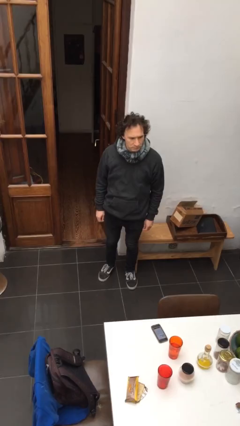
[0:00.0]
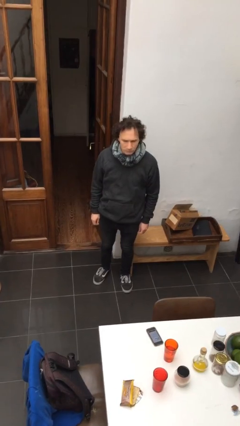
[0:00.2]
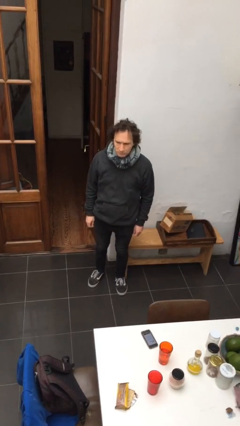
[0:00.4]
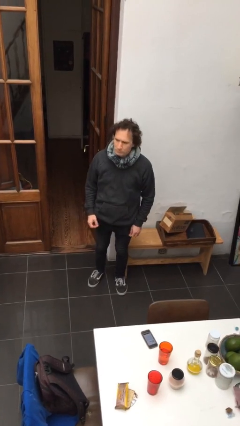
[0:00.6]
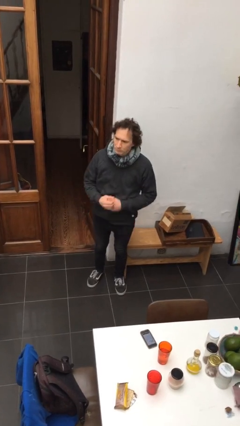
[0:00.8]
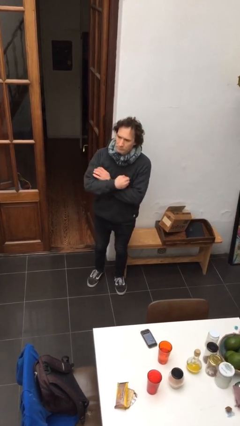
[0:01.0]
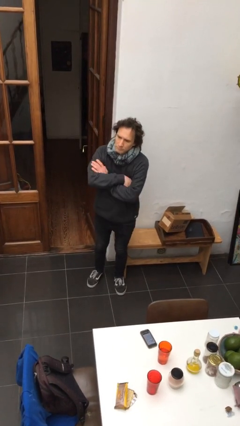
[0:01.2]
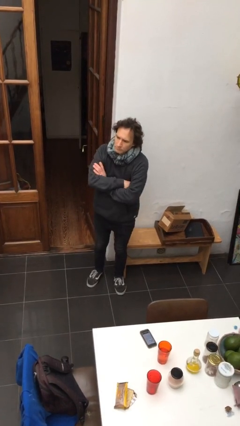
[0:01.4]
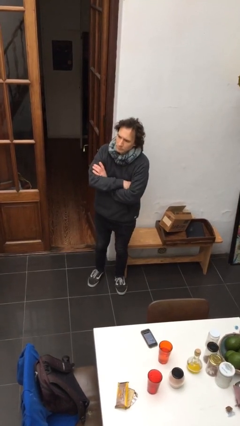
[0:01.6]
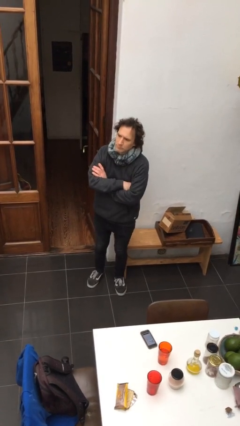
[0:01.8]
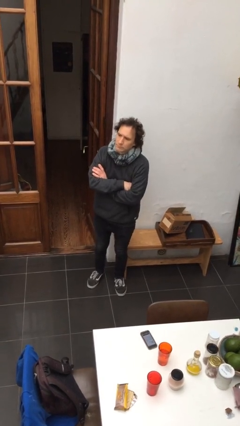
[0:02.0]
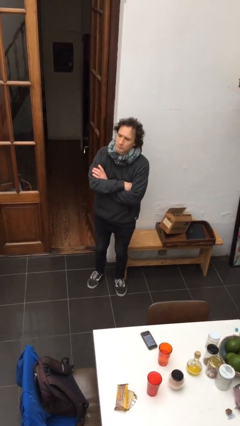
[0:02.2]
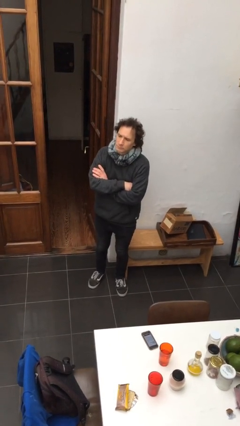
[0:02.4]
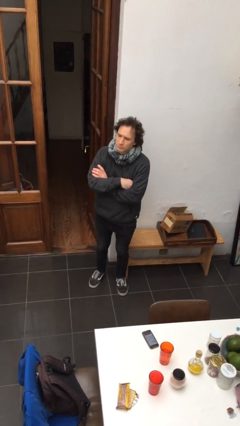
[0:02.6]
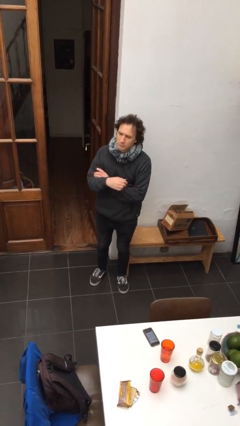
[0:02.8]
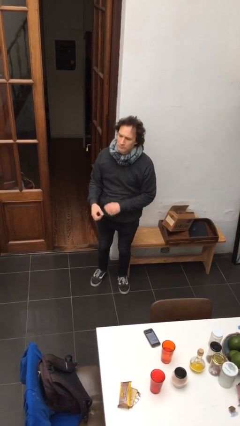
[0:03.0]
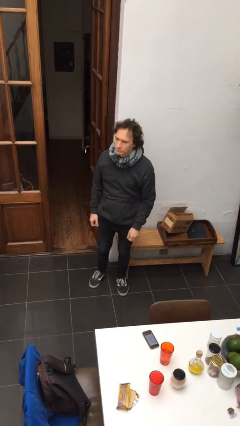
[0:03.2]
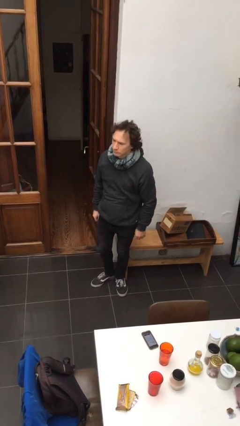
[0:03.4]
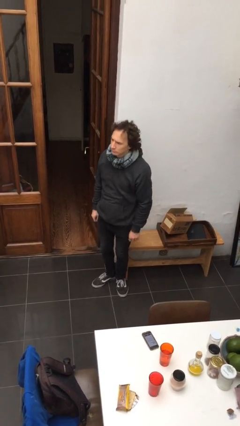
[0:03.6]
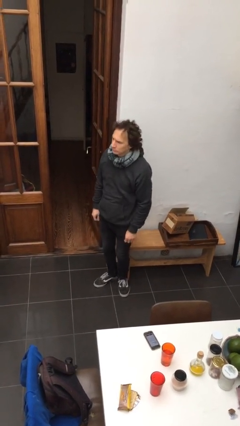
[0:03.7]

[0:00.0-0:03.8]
person crosses arms

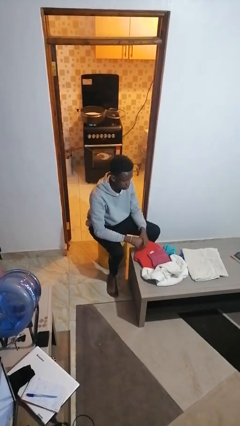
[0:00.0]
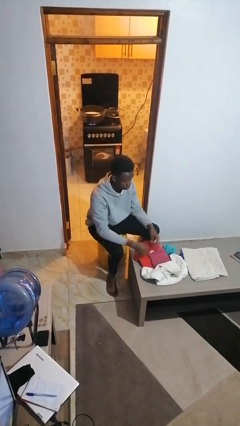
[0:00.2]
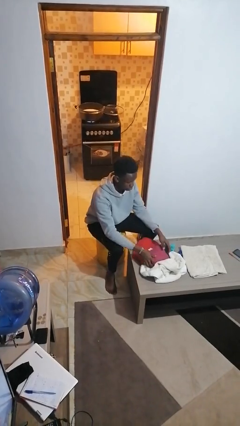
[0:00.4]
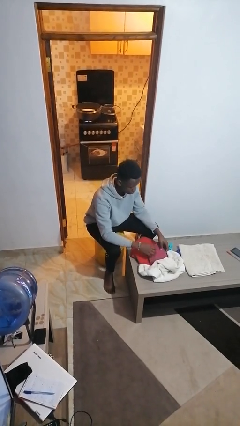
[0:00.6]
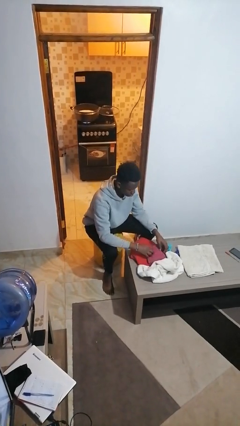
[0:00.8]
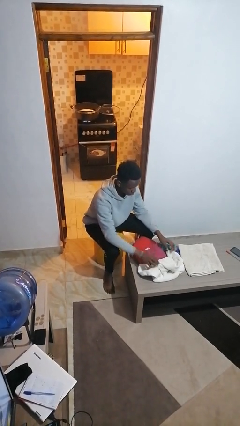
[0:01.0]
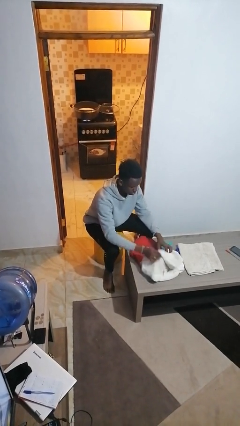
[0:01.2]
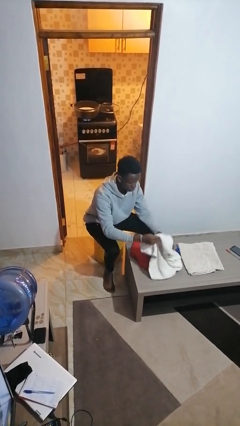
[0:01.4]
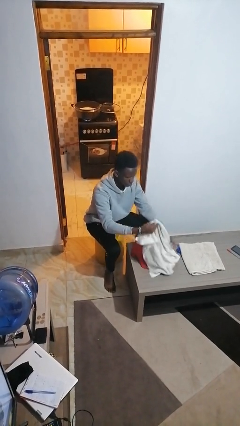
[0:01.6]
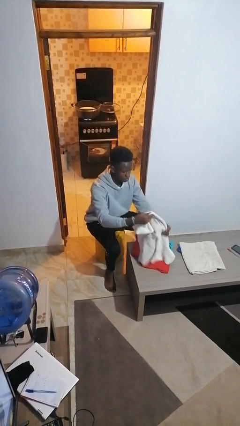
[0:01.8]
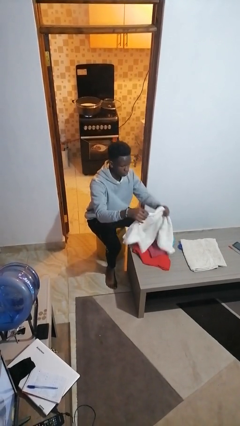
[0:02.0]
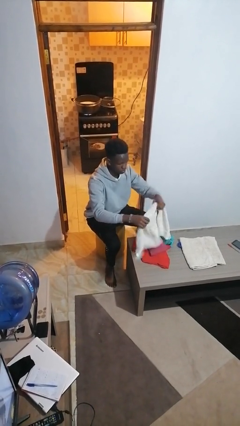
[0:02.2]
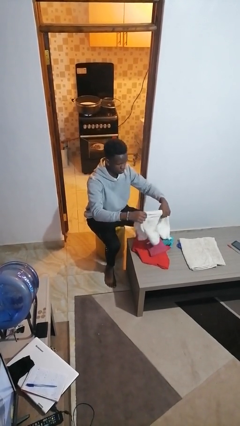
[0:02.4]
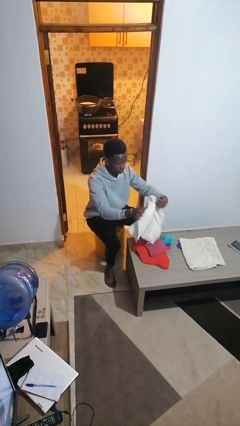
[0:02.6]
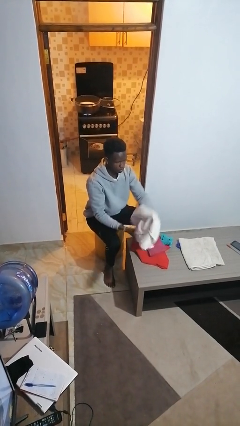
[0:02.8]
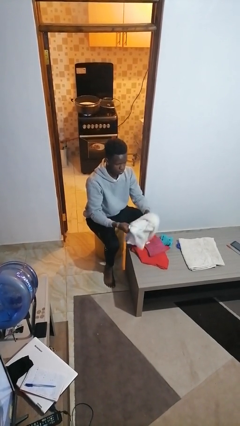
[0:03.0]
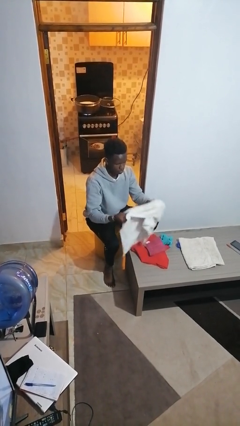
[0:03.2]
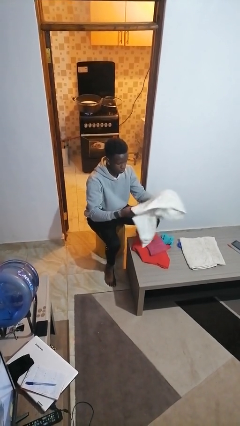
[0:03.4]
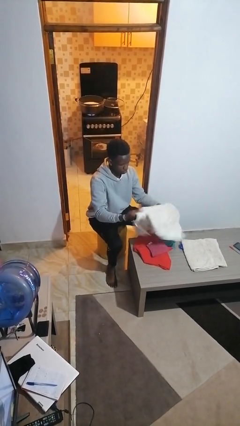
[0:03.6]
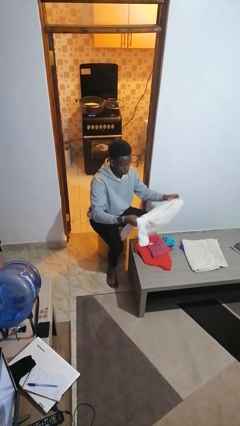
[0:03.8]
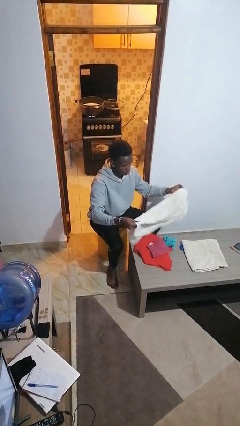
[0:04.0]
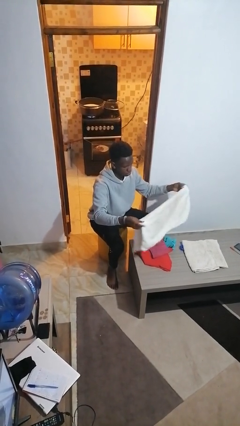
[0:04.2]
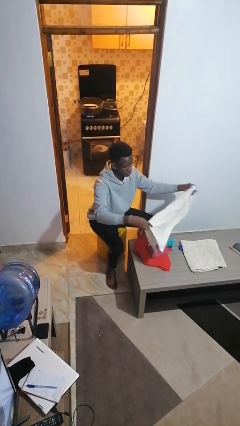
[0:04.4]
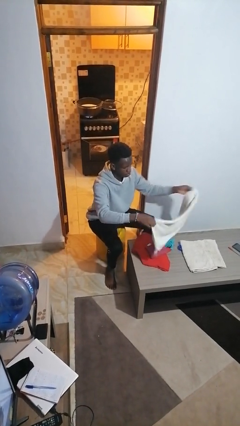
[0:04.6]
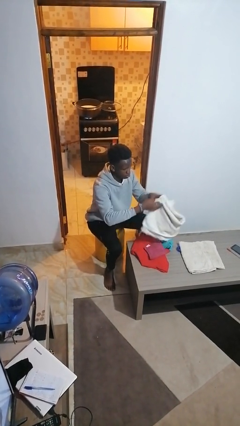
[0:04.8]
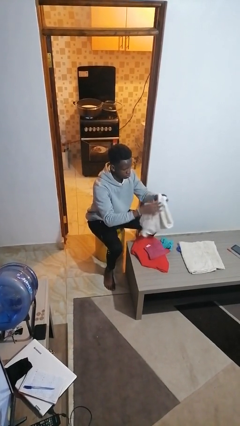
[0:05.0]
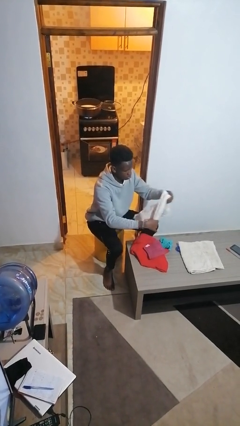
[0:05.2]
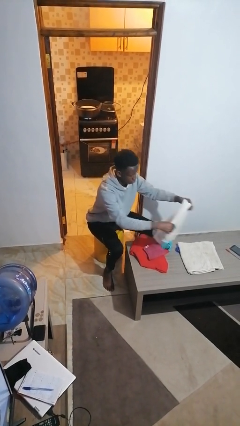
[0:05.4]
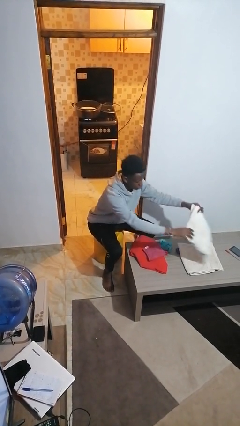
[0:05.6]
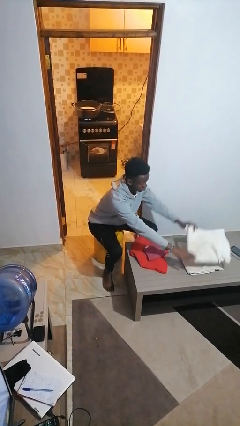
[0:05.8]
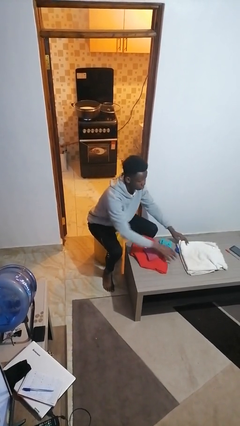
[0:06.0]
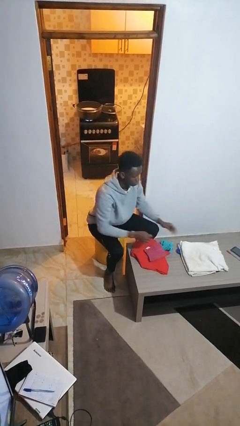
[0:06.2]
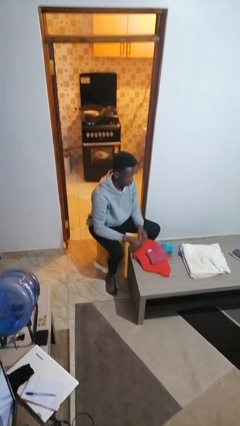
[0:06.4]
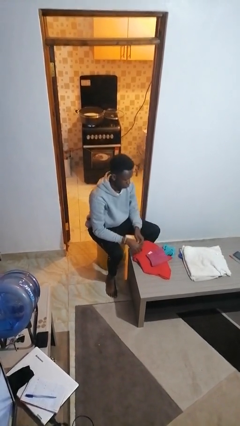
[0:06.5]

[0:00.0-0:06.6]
person folds towel

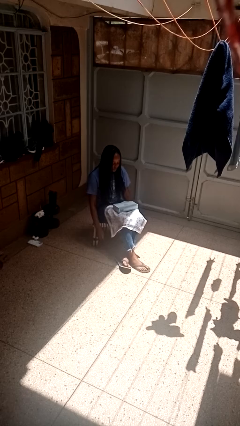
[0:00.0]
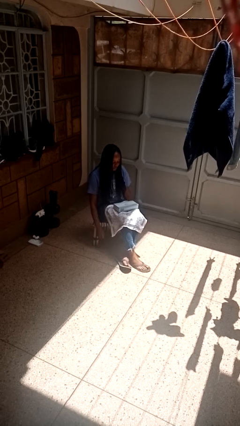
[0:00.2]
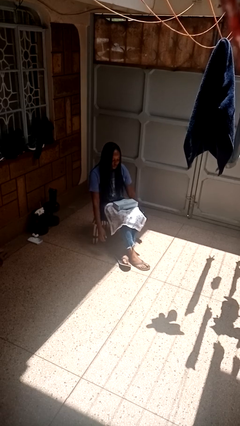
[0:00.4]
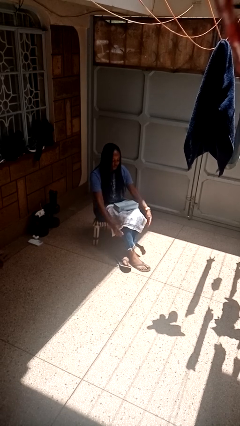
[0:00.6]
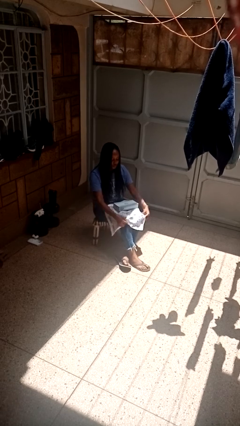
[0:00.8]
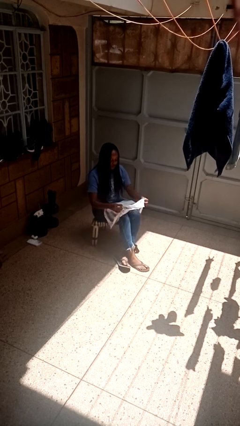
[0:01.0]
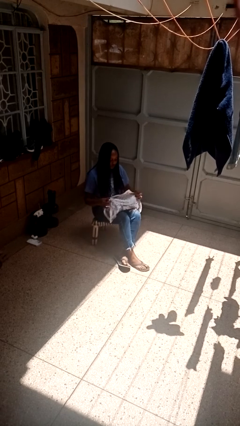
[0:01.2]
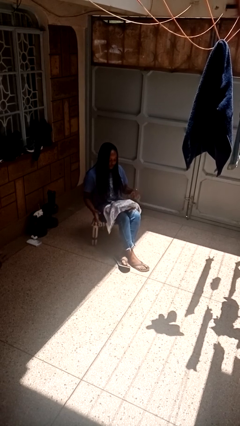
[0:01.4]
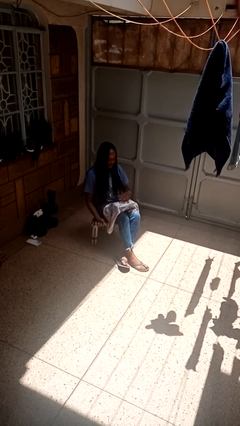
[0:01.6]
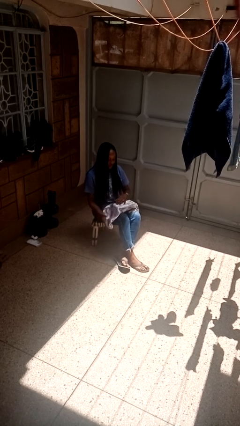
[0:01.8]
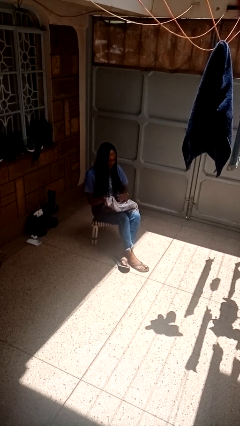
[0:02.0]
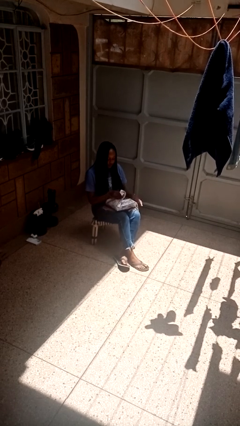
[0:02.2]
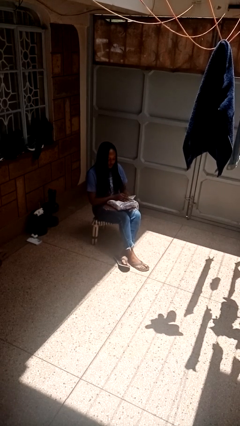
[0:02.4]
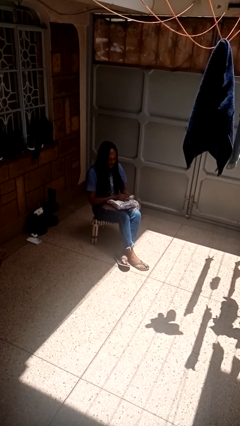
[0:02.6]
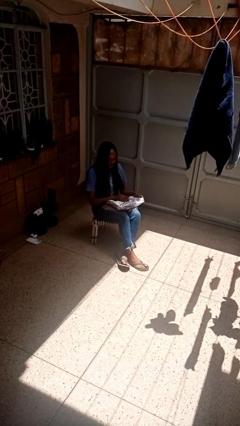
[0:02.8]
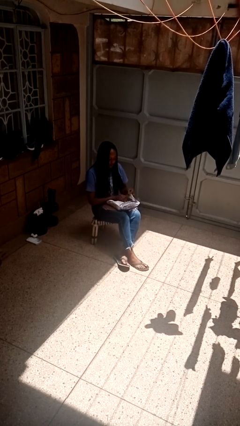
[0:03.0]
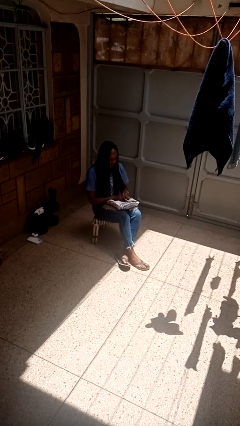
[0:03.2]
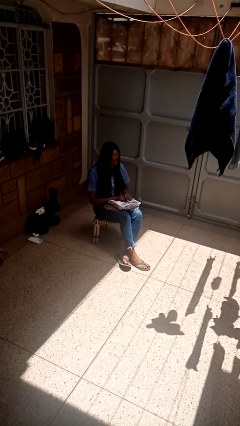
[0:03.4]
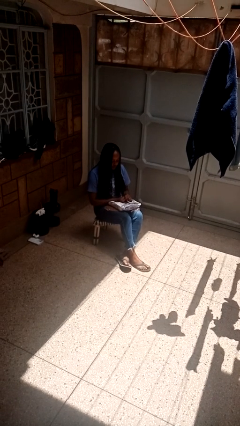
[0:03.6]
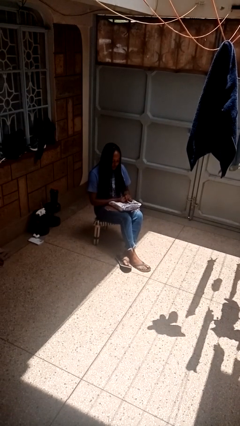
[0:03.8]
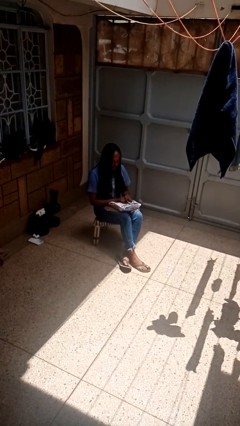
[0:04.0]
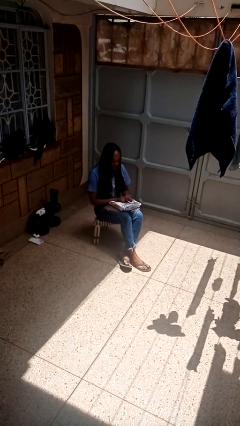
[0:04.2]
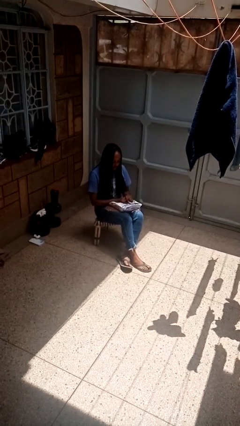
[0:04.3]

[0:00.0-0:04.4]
person wraps box

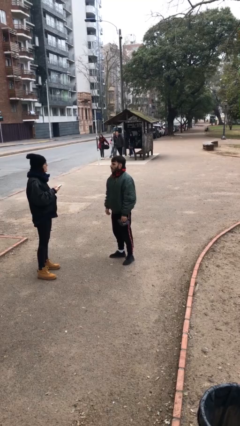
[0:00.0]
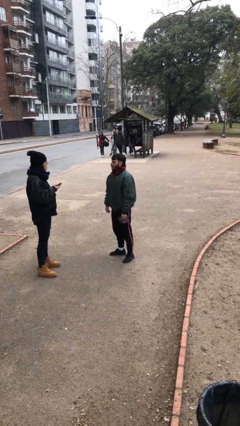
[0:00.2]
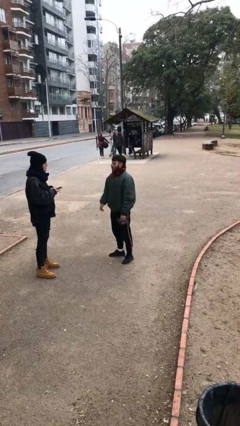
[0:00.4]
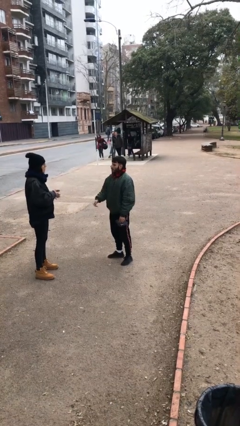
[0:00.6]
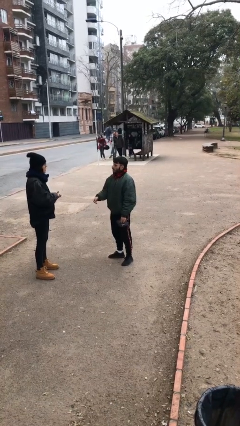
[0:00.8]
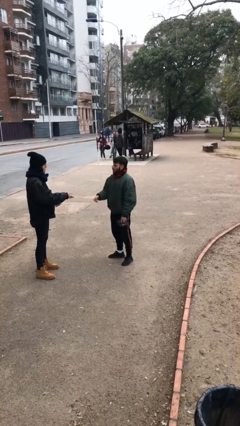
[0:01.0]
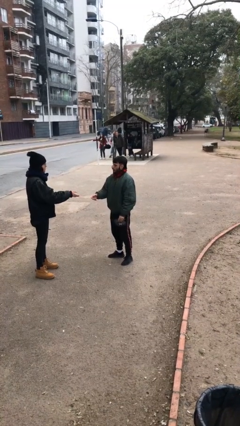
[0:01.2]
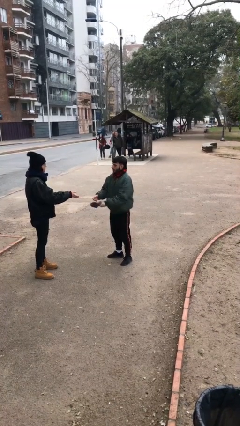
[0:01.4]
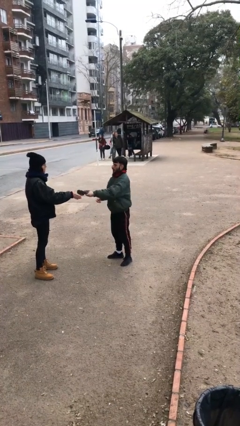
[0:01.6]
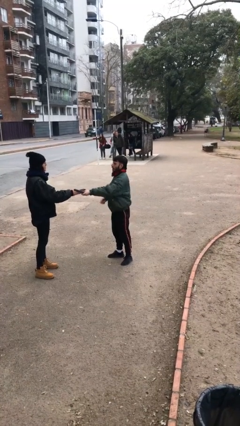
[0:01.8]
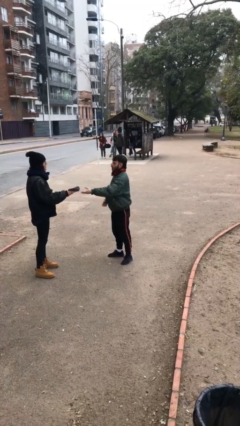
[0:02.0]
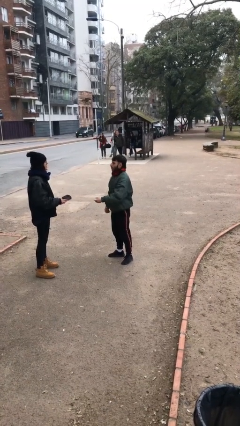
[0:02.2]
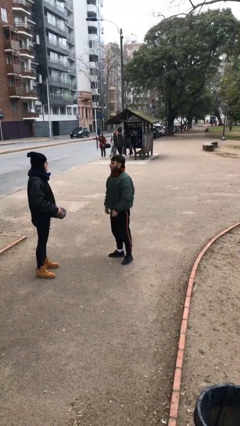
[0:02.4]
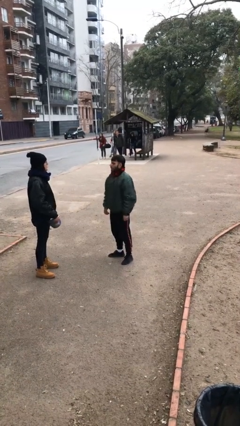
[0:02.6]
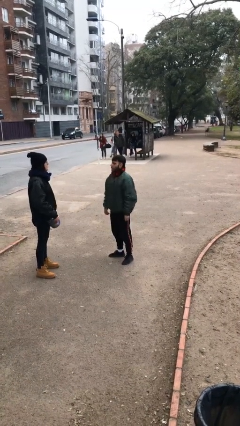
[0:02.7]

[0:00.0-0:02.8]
person transfers object to person

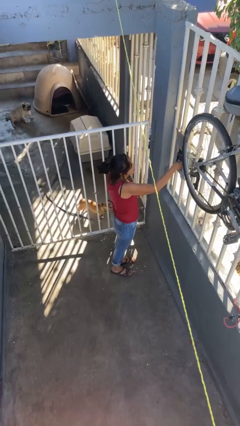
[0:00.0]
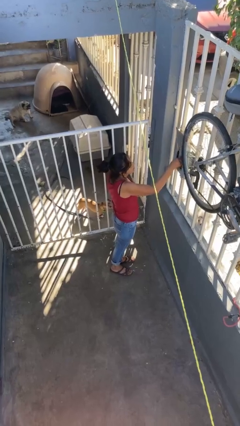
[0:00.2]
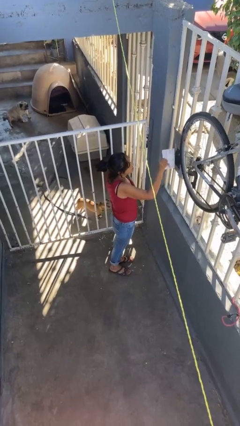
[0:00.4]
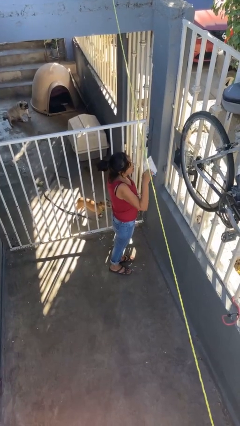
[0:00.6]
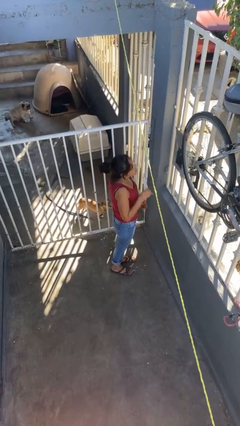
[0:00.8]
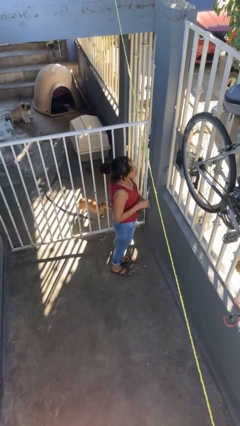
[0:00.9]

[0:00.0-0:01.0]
person takes letters from mailbox
